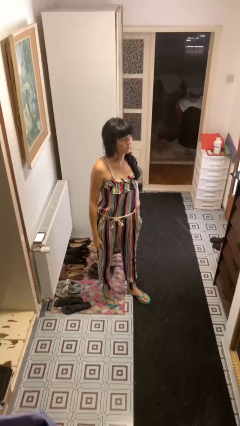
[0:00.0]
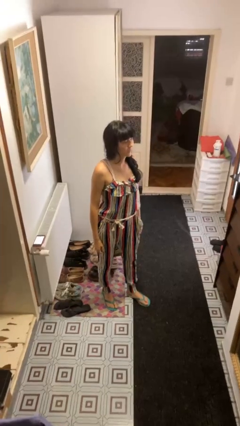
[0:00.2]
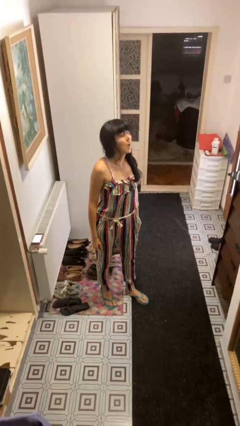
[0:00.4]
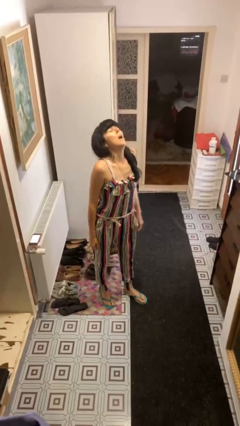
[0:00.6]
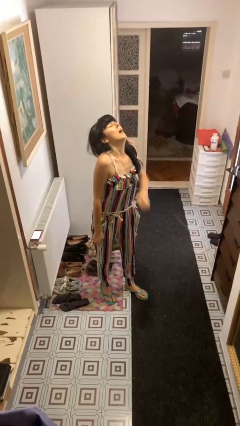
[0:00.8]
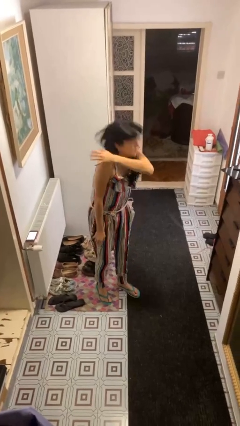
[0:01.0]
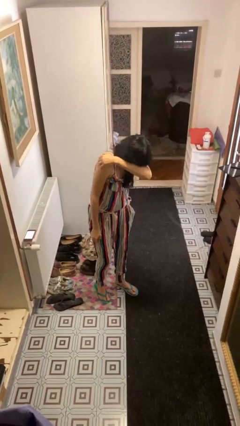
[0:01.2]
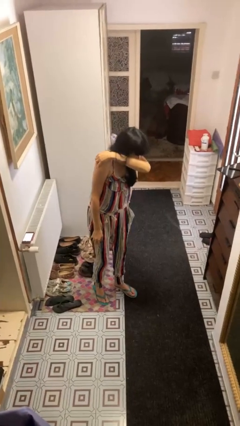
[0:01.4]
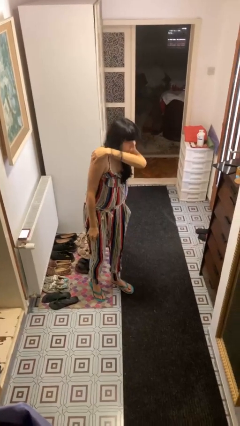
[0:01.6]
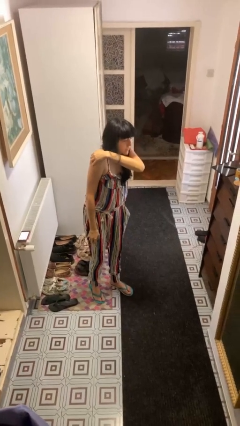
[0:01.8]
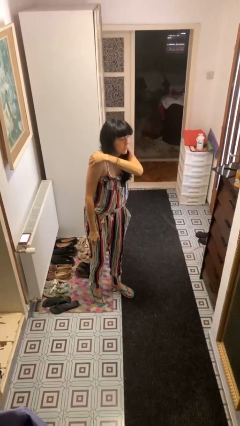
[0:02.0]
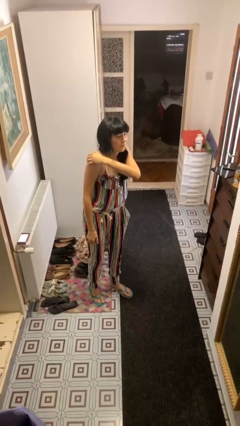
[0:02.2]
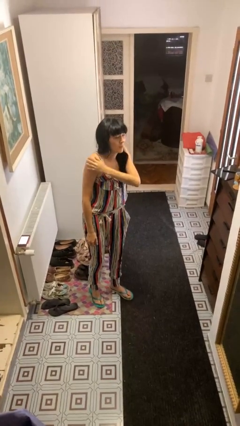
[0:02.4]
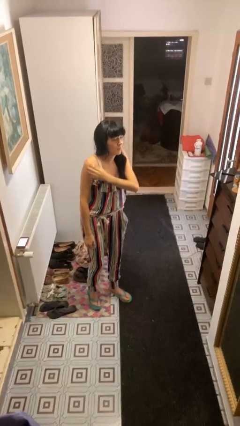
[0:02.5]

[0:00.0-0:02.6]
person sneezes into arm

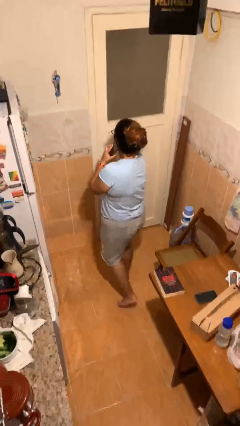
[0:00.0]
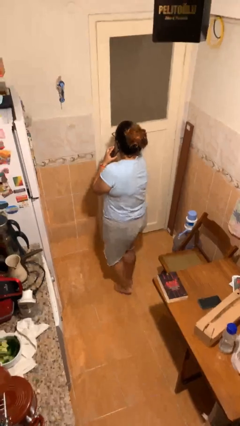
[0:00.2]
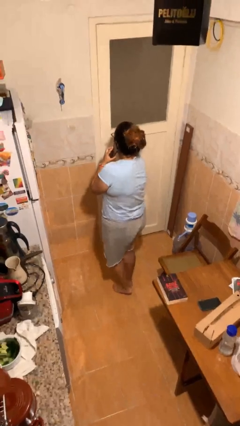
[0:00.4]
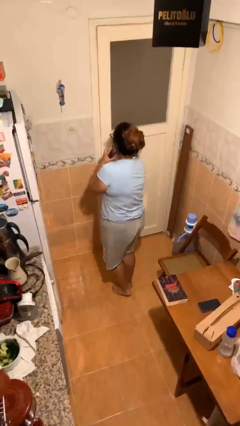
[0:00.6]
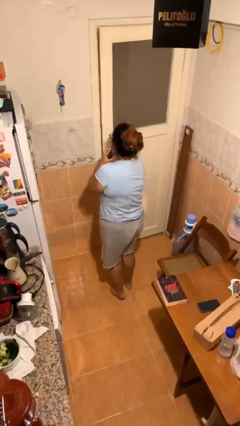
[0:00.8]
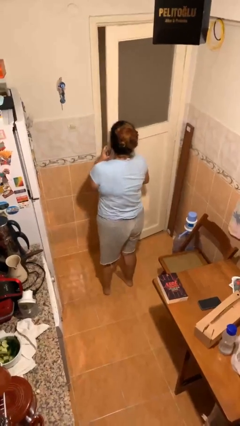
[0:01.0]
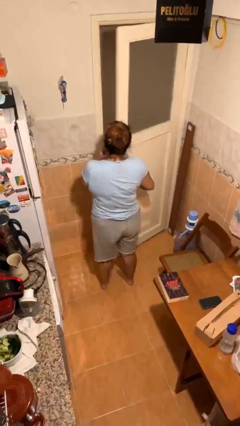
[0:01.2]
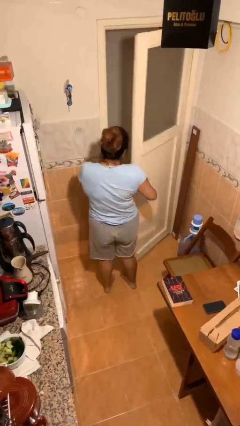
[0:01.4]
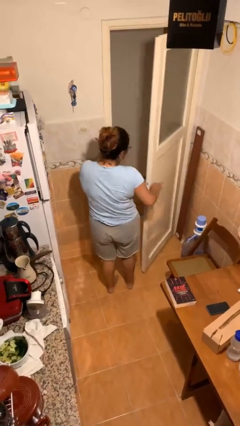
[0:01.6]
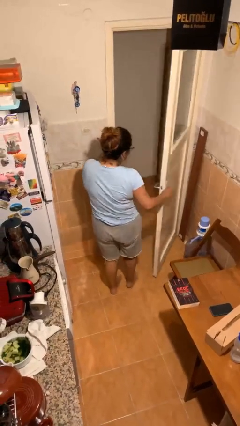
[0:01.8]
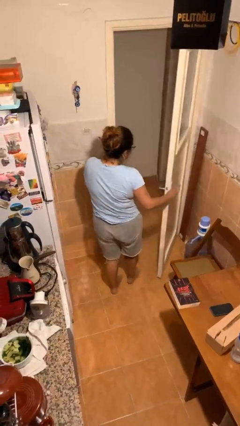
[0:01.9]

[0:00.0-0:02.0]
person opens facility door

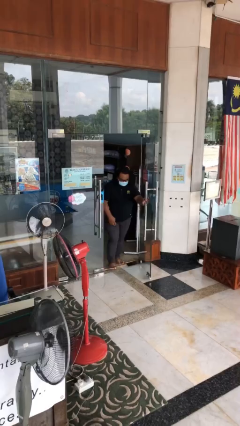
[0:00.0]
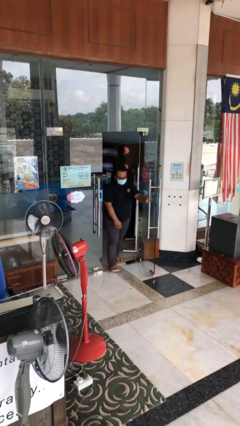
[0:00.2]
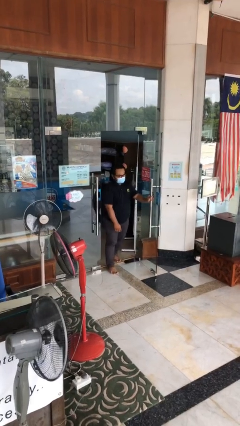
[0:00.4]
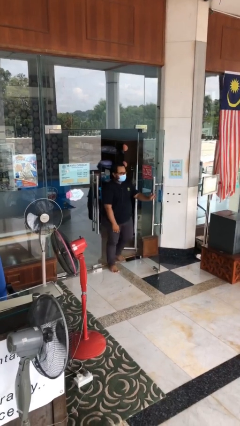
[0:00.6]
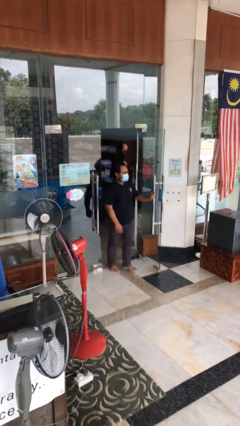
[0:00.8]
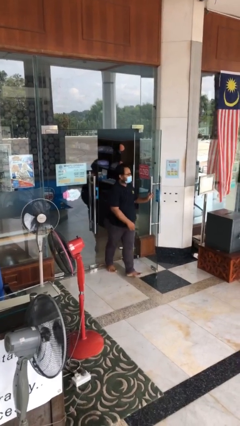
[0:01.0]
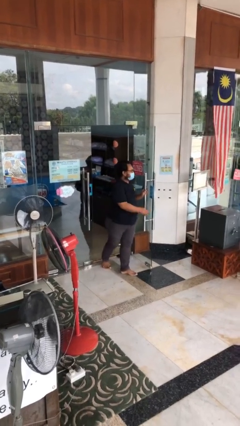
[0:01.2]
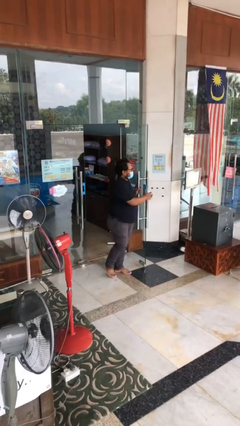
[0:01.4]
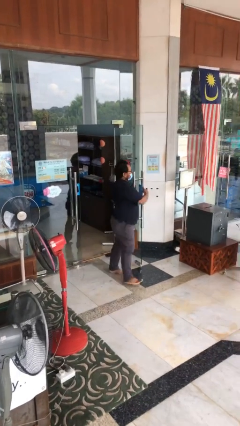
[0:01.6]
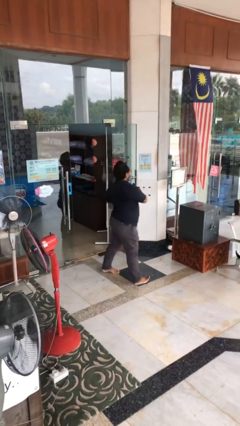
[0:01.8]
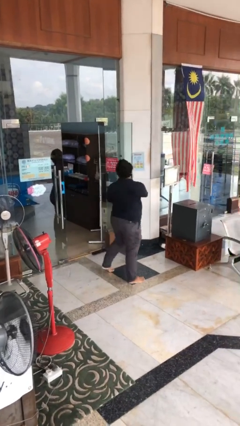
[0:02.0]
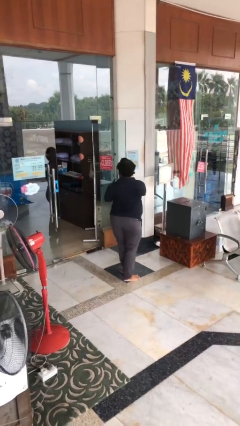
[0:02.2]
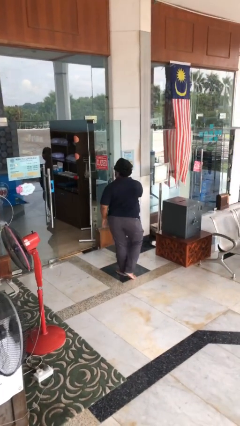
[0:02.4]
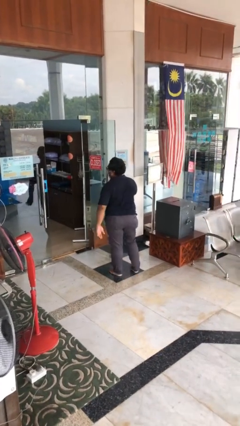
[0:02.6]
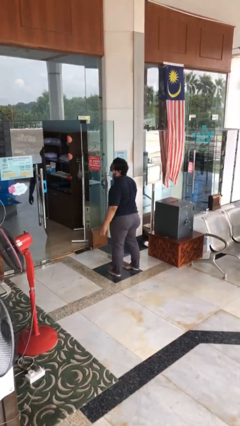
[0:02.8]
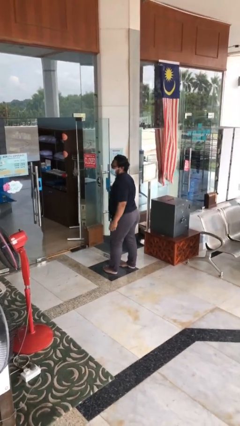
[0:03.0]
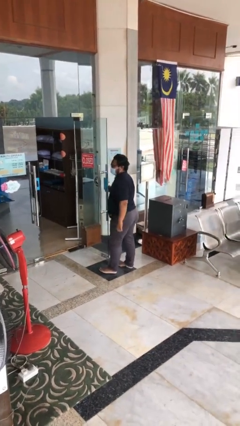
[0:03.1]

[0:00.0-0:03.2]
person enters scene through structure

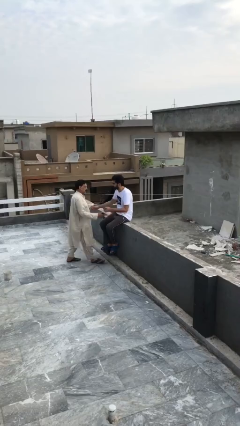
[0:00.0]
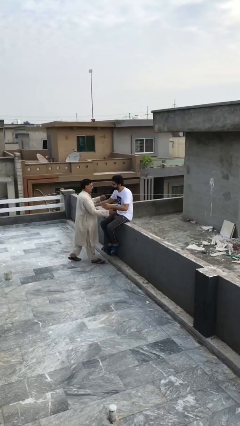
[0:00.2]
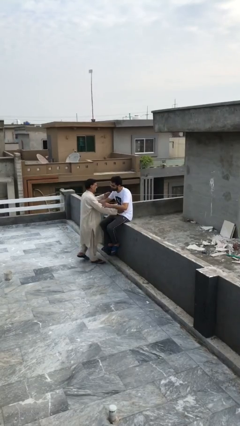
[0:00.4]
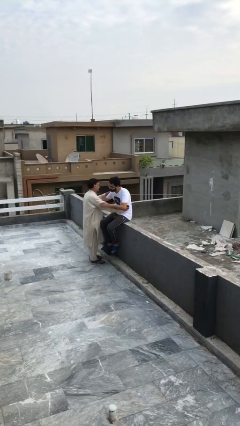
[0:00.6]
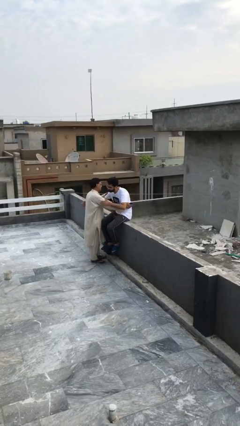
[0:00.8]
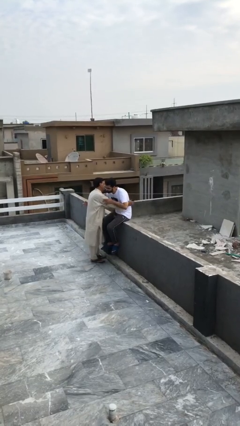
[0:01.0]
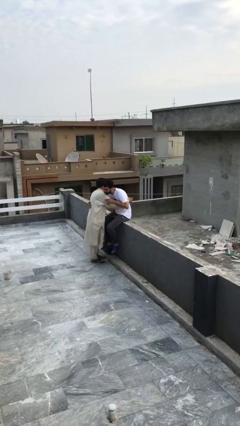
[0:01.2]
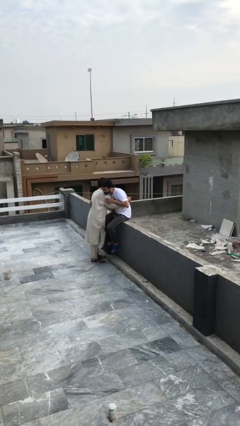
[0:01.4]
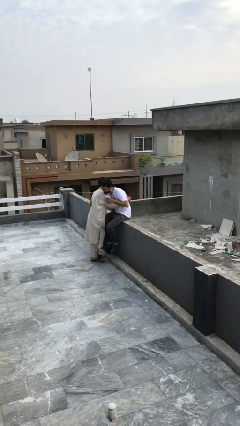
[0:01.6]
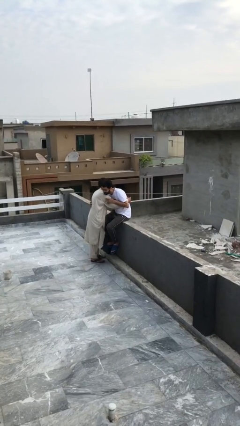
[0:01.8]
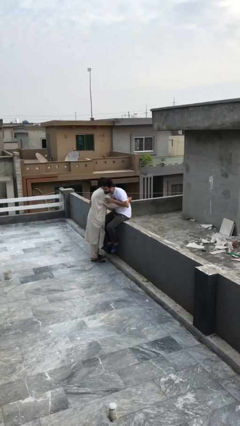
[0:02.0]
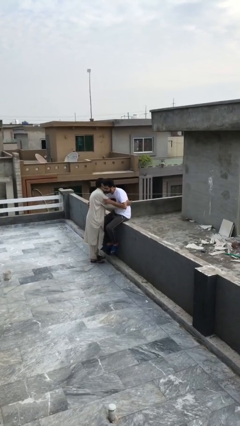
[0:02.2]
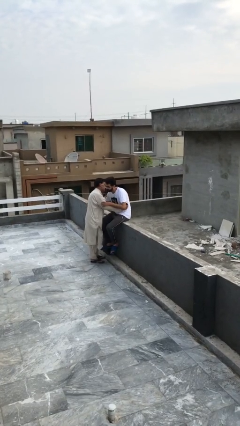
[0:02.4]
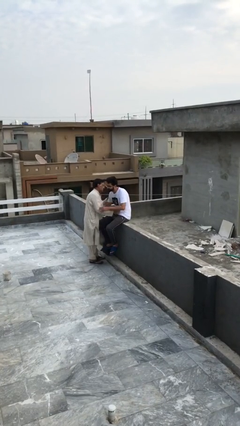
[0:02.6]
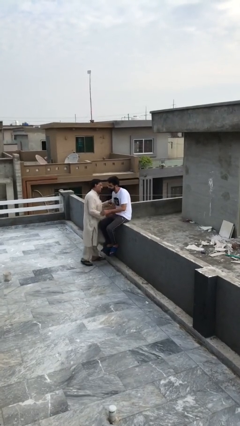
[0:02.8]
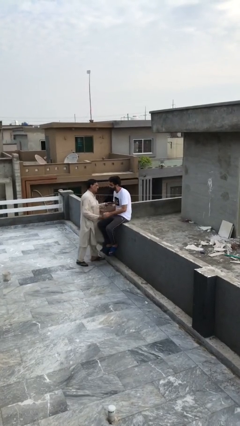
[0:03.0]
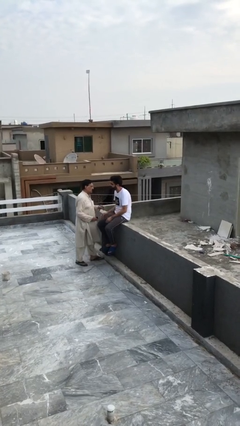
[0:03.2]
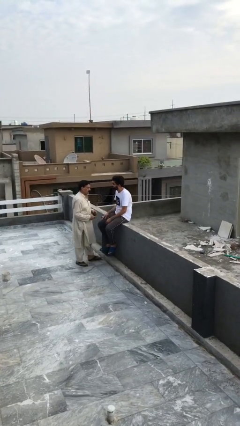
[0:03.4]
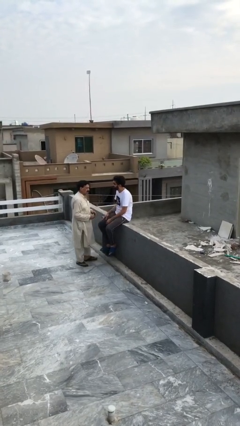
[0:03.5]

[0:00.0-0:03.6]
person embraces person

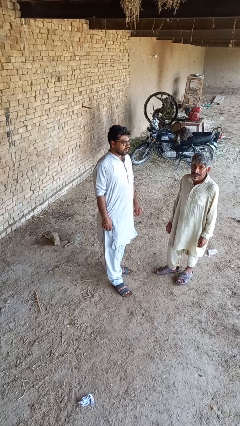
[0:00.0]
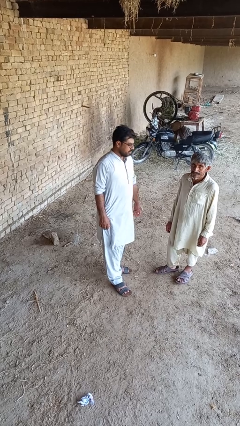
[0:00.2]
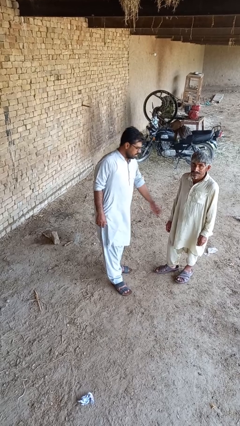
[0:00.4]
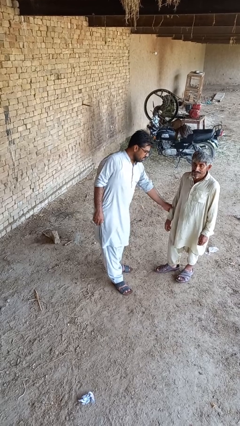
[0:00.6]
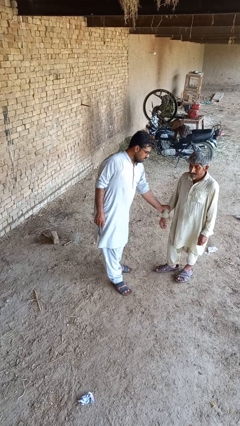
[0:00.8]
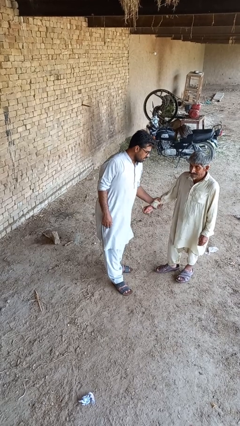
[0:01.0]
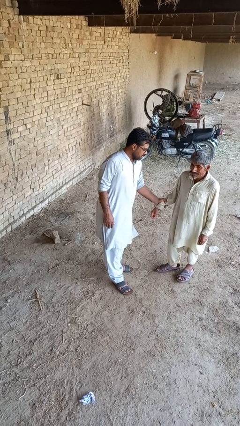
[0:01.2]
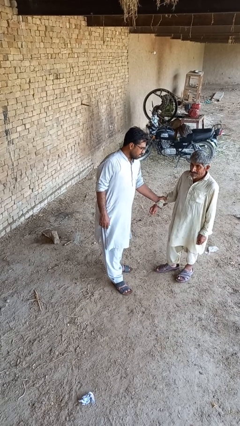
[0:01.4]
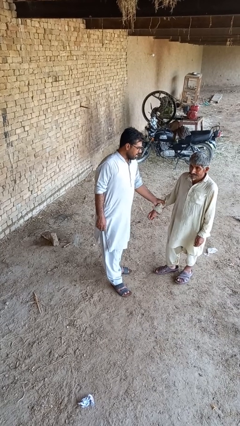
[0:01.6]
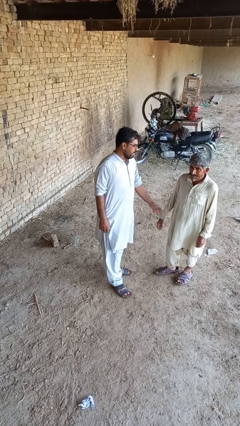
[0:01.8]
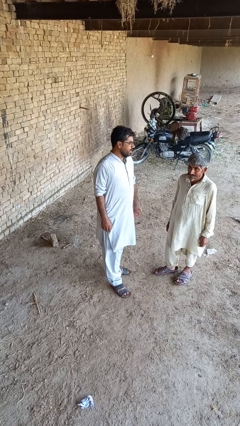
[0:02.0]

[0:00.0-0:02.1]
person grabs person by forearm

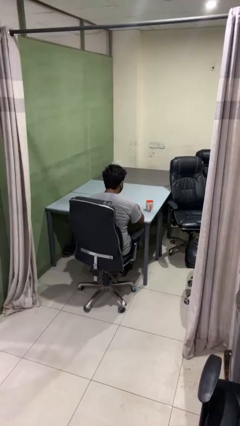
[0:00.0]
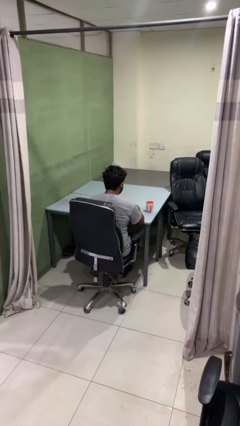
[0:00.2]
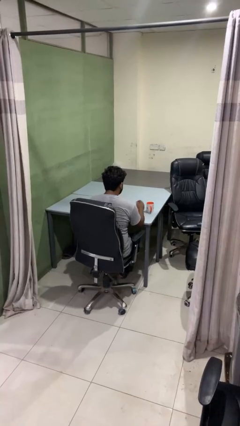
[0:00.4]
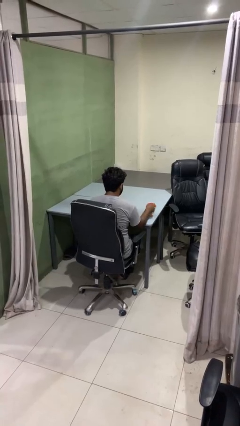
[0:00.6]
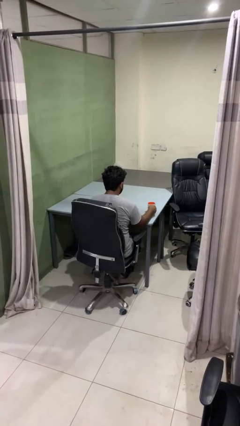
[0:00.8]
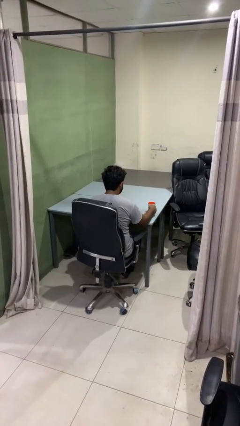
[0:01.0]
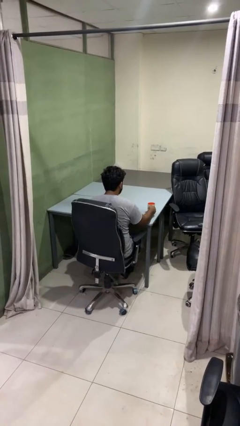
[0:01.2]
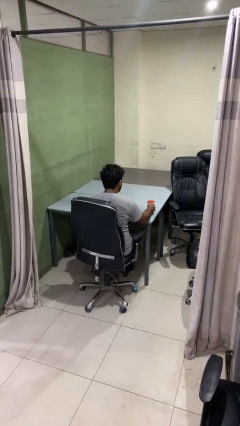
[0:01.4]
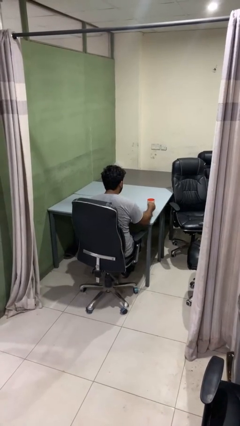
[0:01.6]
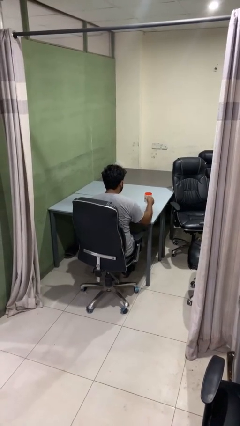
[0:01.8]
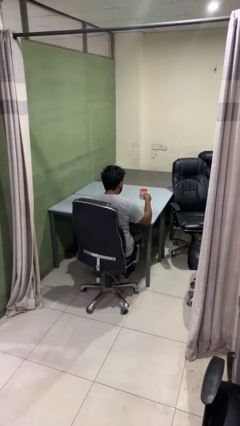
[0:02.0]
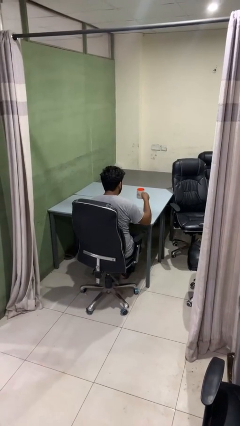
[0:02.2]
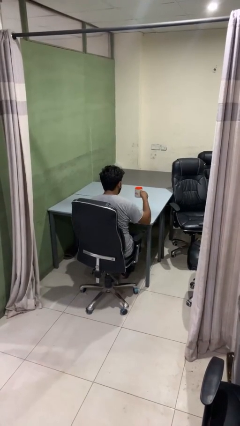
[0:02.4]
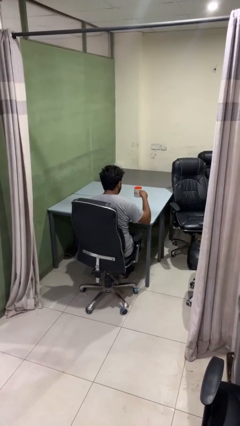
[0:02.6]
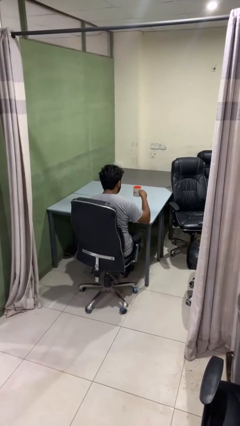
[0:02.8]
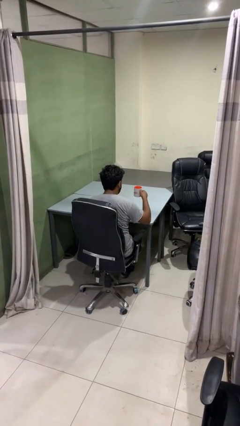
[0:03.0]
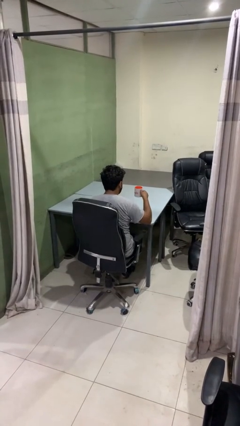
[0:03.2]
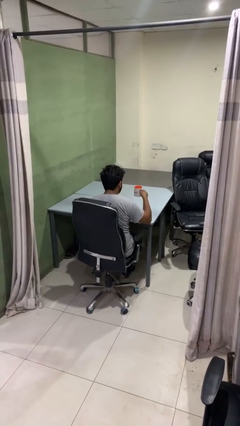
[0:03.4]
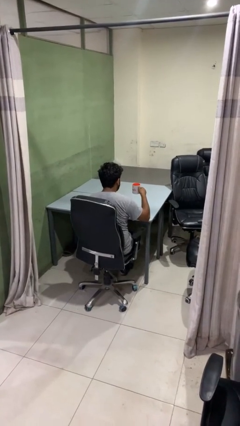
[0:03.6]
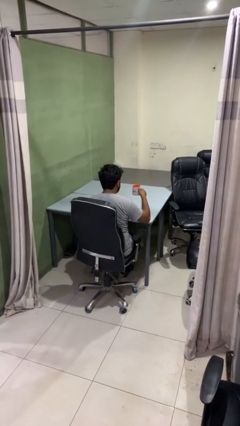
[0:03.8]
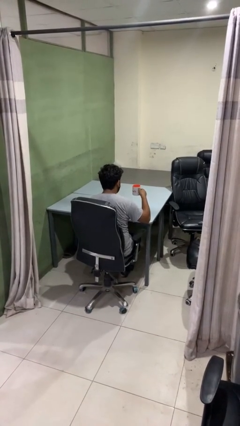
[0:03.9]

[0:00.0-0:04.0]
person picks up object from table
